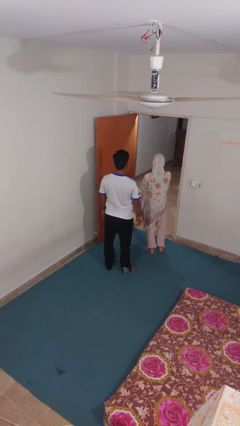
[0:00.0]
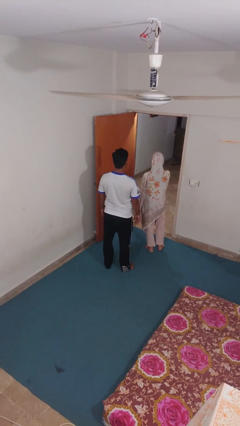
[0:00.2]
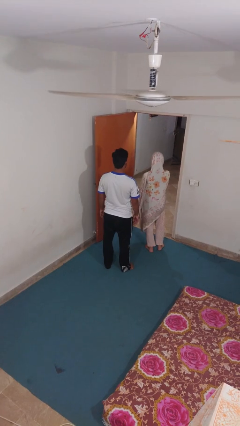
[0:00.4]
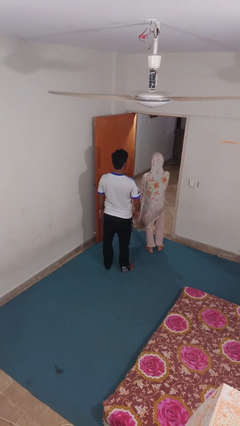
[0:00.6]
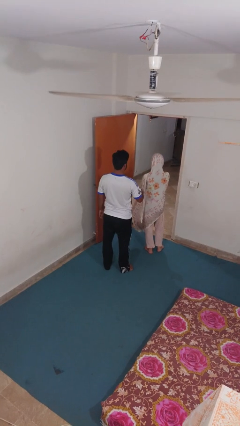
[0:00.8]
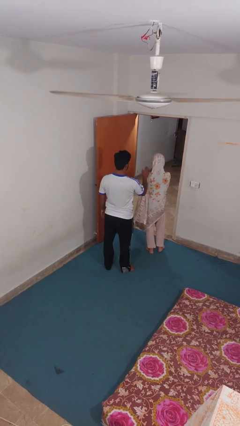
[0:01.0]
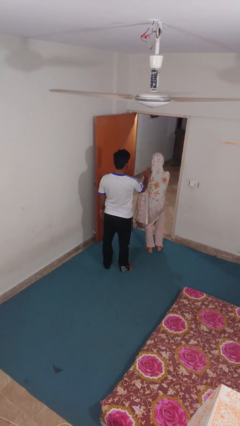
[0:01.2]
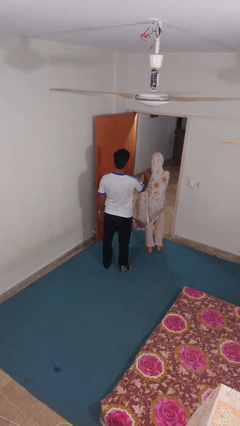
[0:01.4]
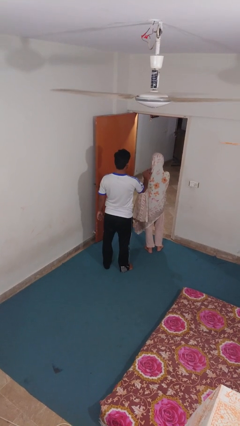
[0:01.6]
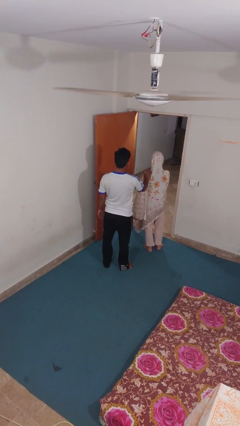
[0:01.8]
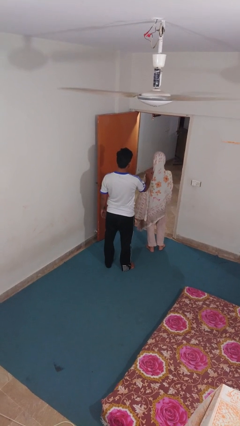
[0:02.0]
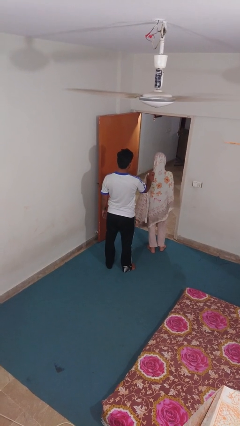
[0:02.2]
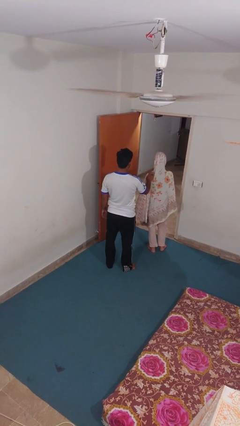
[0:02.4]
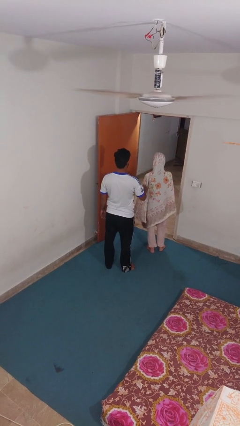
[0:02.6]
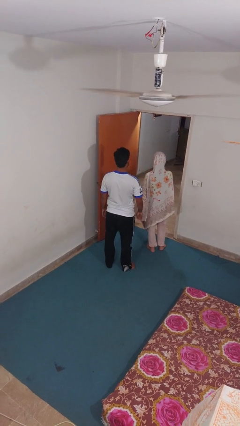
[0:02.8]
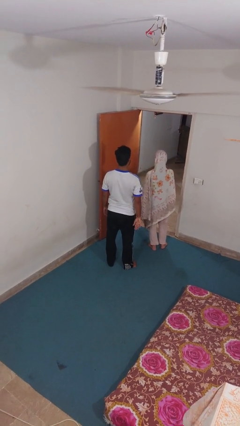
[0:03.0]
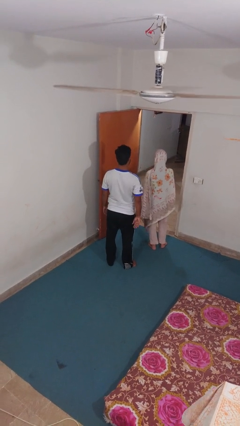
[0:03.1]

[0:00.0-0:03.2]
person touches back of person

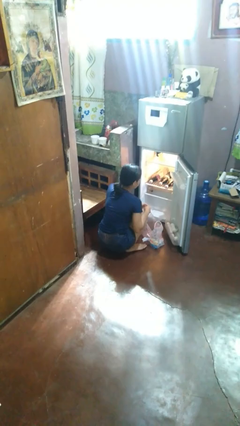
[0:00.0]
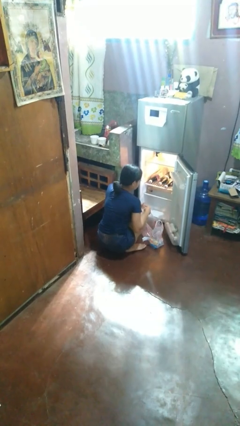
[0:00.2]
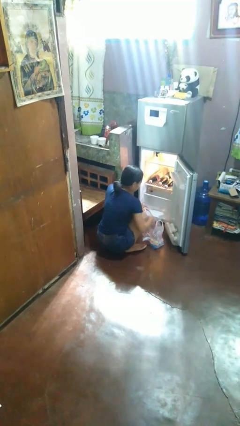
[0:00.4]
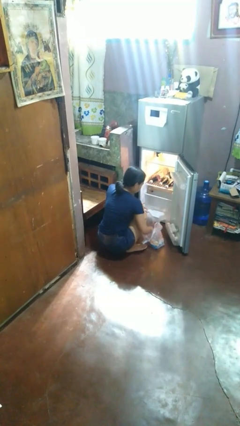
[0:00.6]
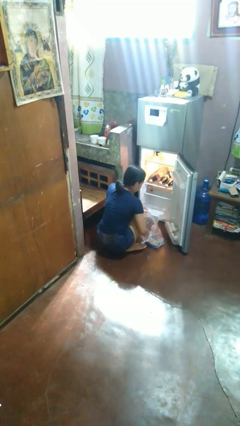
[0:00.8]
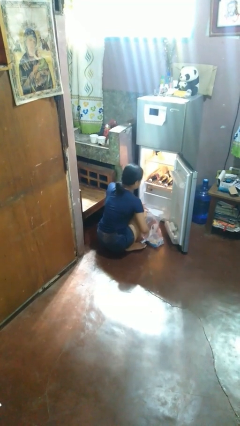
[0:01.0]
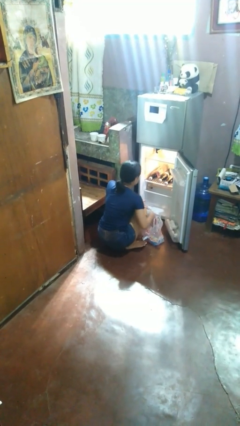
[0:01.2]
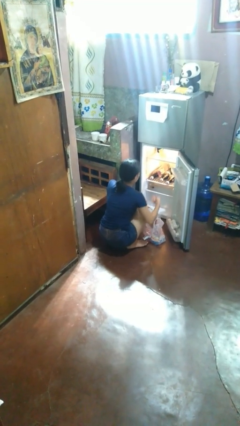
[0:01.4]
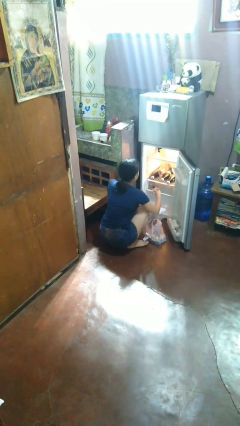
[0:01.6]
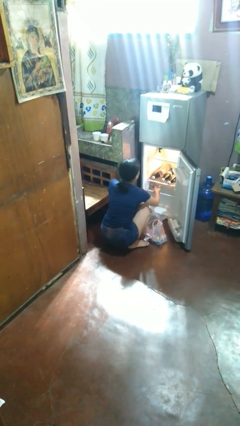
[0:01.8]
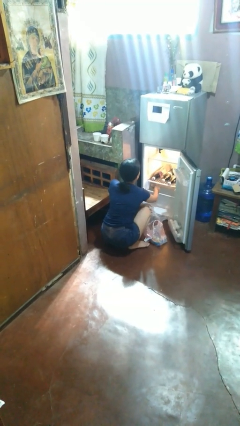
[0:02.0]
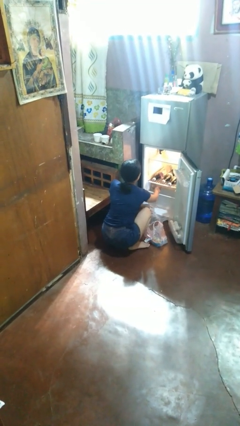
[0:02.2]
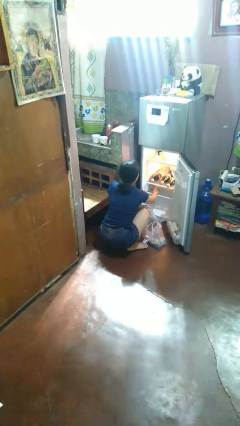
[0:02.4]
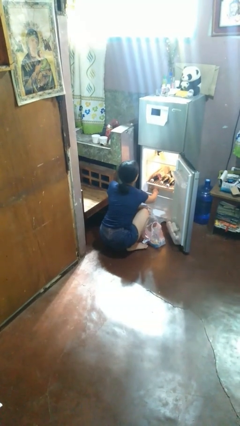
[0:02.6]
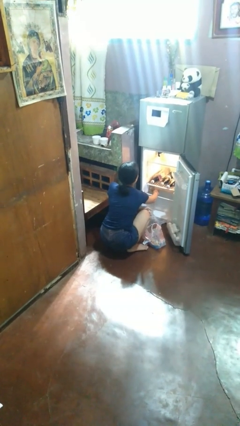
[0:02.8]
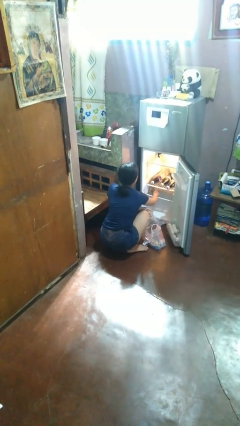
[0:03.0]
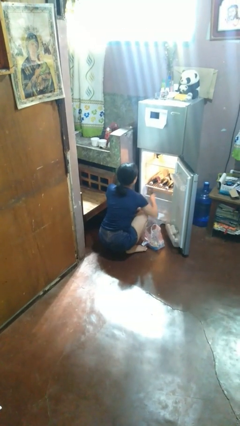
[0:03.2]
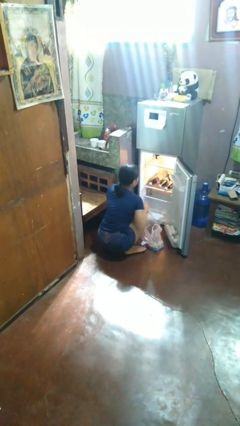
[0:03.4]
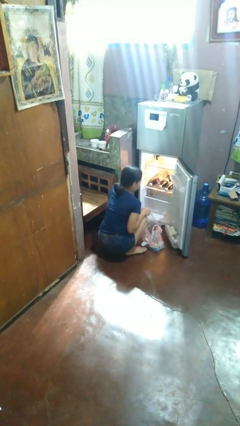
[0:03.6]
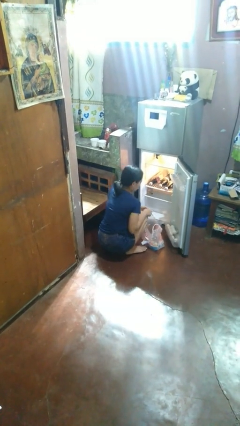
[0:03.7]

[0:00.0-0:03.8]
person loads groceries into refrigerator

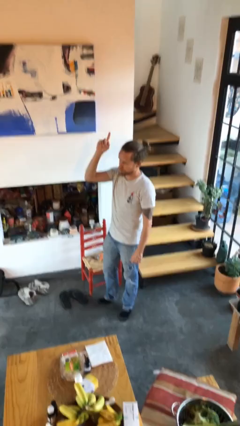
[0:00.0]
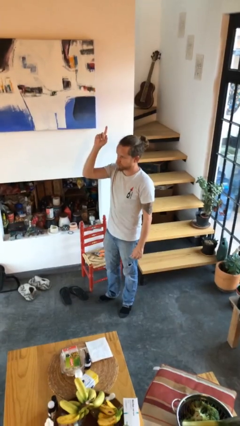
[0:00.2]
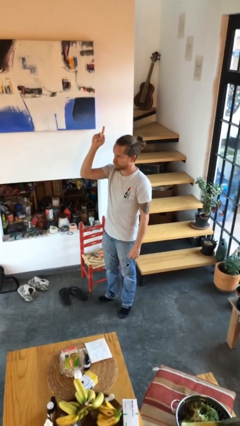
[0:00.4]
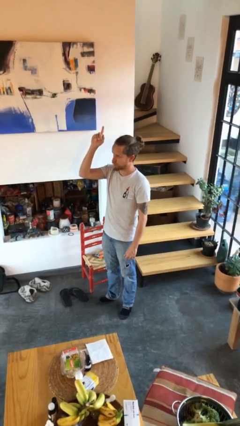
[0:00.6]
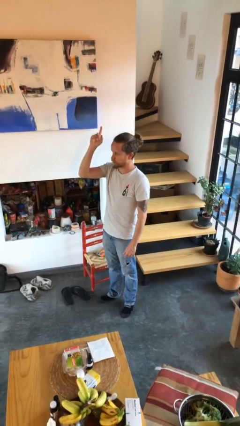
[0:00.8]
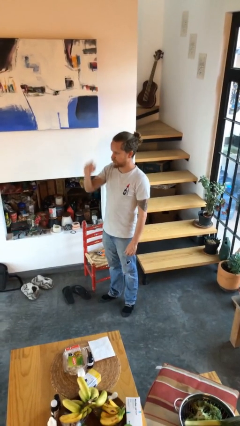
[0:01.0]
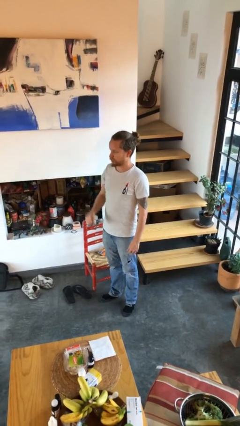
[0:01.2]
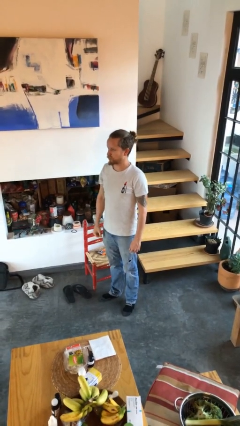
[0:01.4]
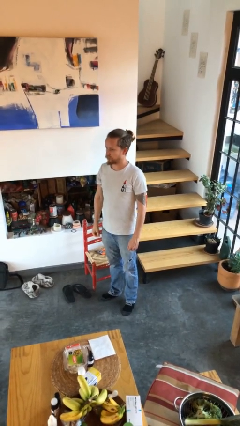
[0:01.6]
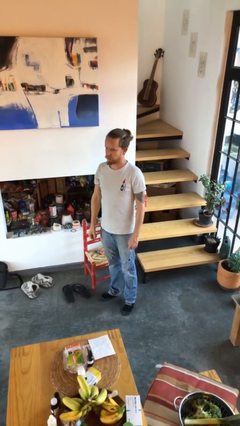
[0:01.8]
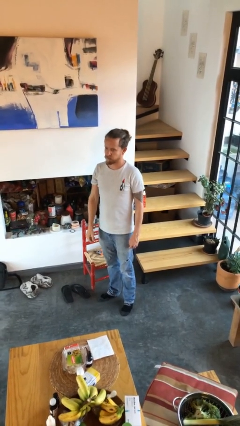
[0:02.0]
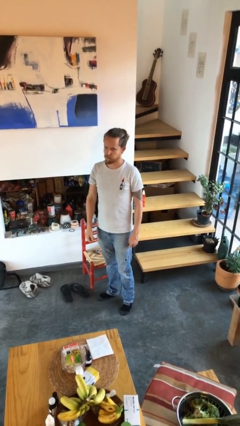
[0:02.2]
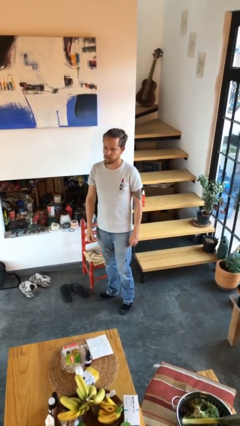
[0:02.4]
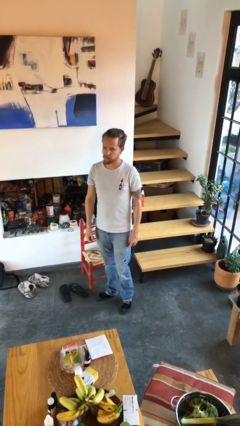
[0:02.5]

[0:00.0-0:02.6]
person gestures lower hand

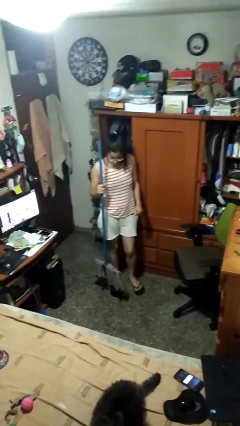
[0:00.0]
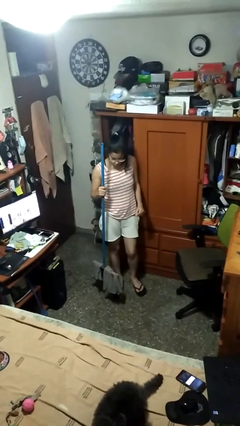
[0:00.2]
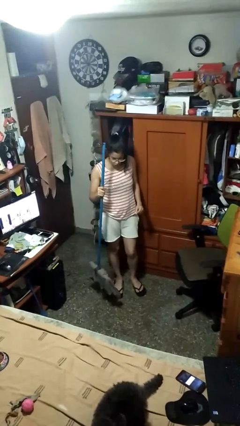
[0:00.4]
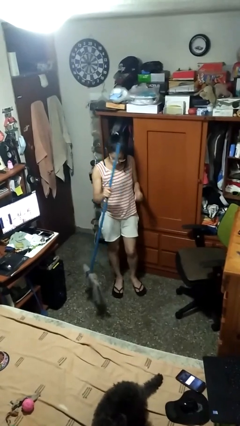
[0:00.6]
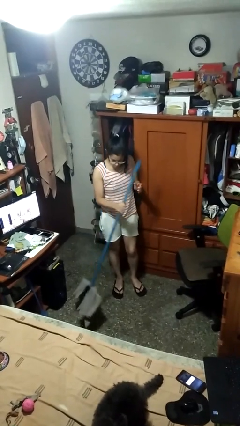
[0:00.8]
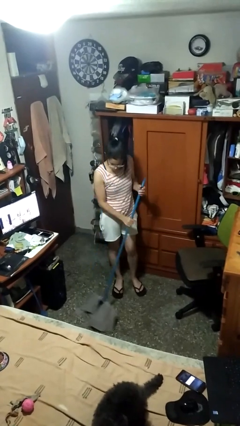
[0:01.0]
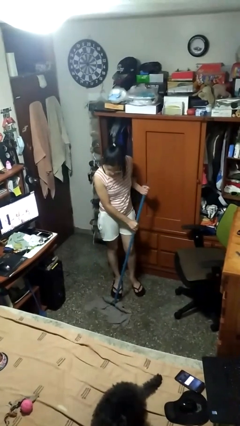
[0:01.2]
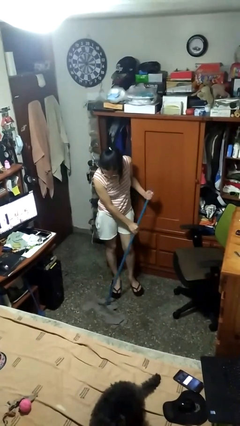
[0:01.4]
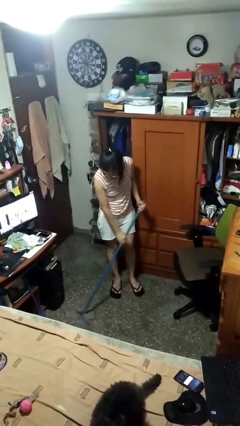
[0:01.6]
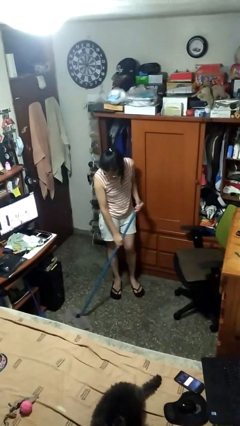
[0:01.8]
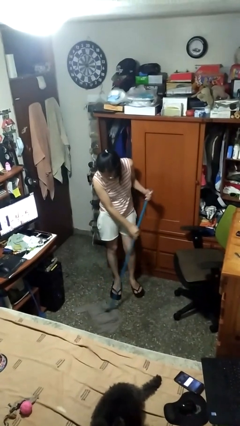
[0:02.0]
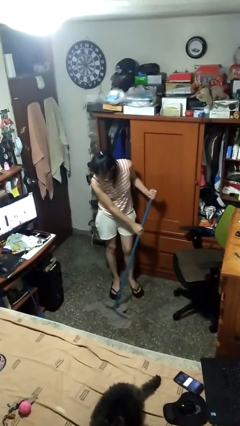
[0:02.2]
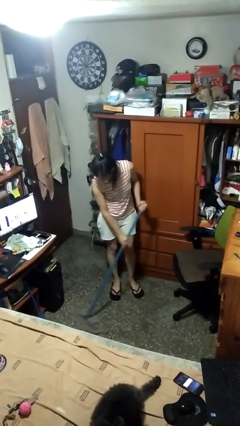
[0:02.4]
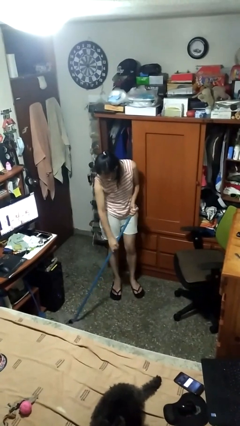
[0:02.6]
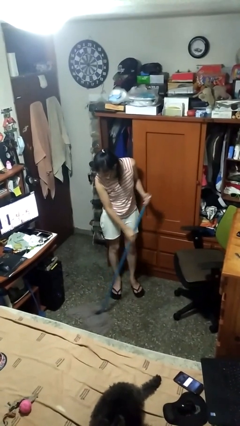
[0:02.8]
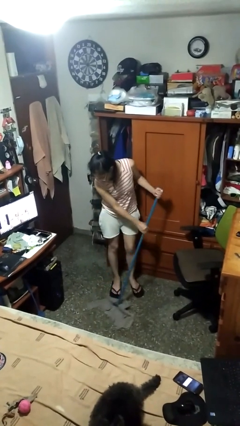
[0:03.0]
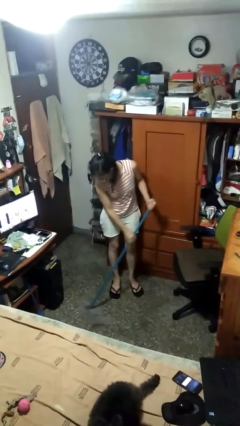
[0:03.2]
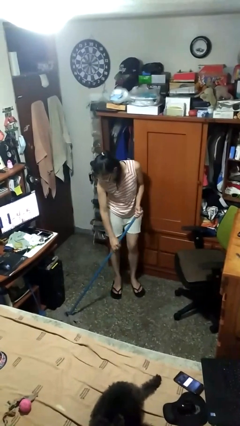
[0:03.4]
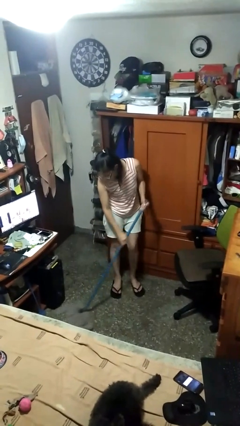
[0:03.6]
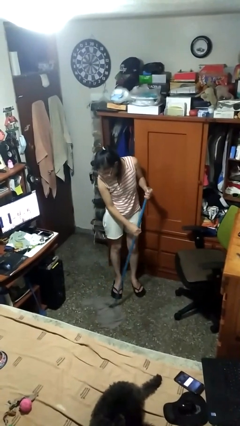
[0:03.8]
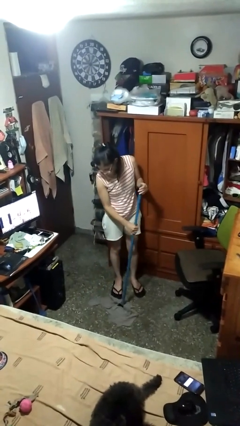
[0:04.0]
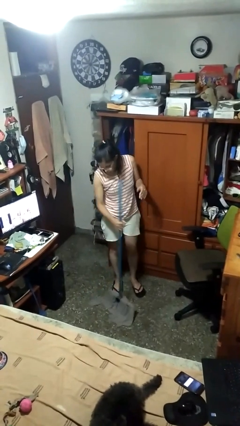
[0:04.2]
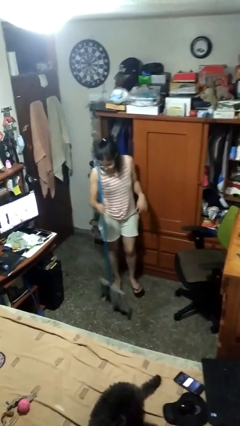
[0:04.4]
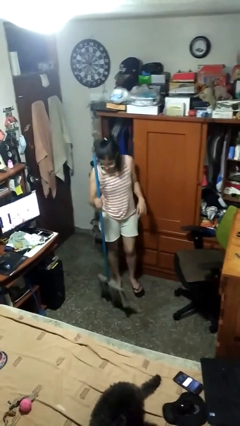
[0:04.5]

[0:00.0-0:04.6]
person mops

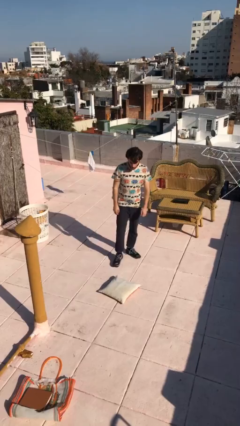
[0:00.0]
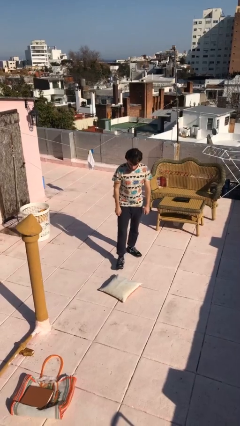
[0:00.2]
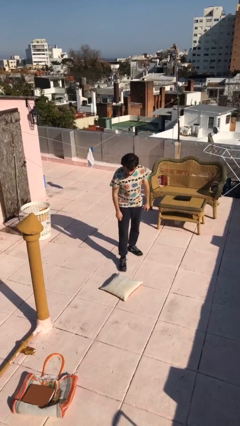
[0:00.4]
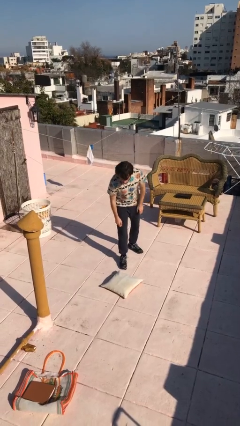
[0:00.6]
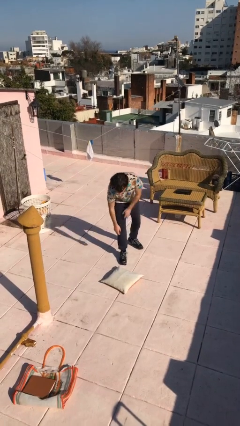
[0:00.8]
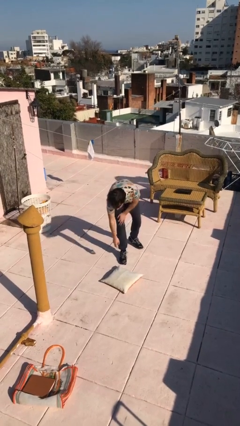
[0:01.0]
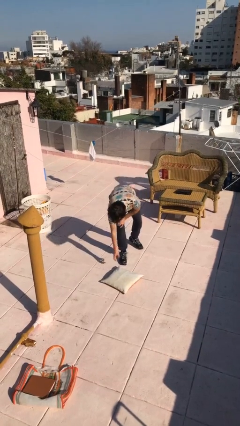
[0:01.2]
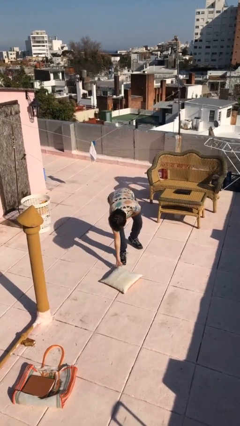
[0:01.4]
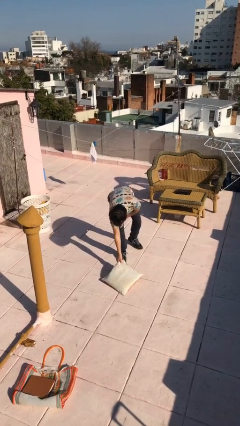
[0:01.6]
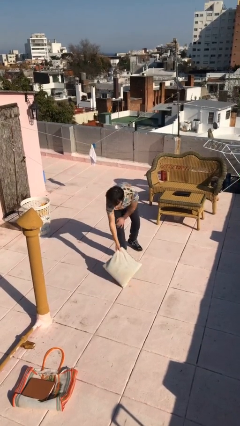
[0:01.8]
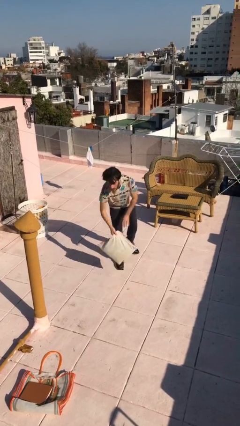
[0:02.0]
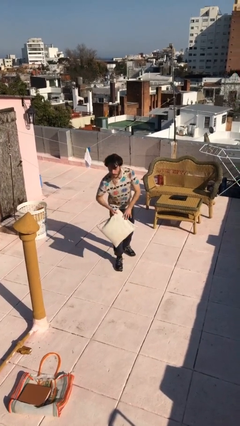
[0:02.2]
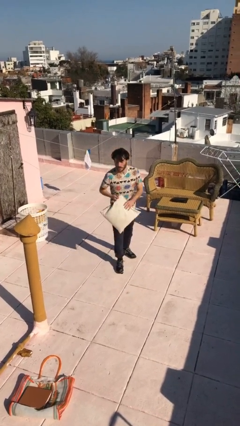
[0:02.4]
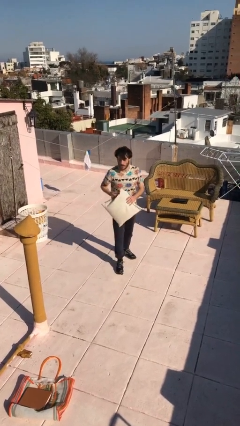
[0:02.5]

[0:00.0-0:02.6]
person picks up object from floor

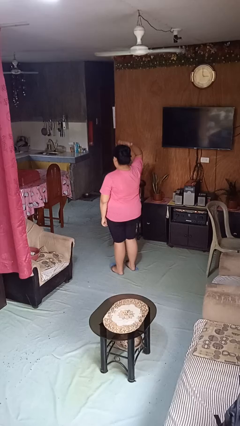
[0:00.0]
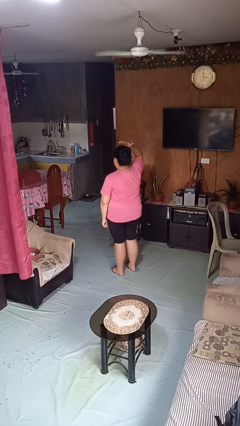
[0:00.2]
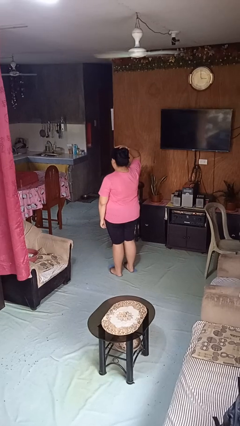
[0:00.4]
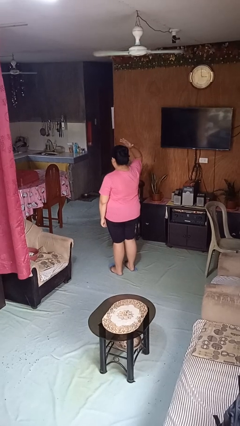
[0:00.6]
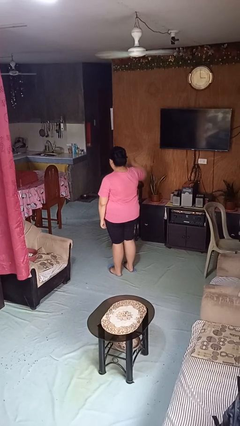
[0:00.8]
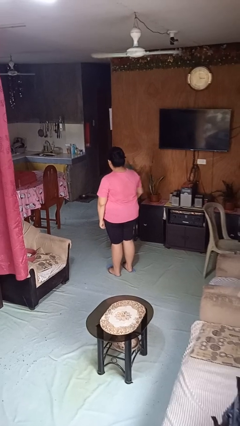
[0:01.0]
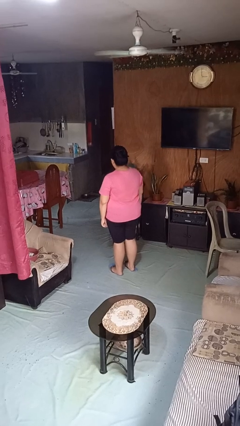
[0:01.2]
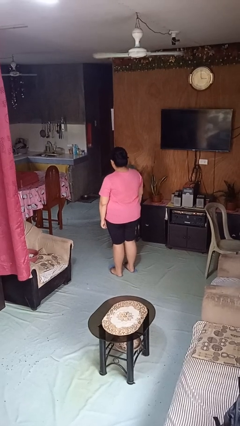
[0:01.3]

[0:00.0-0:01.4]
person pats head
